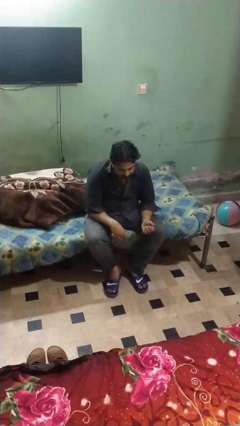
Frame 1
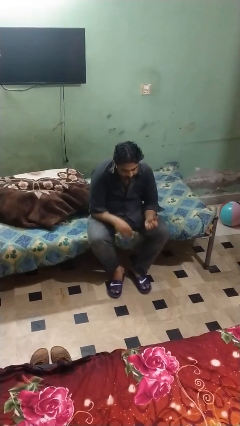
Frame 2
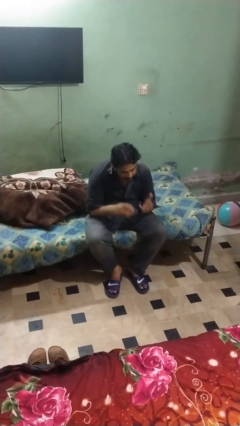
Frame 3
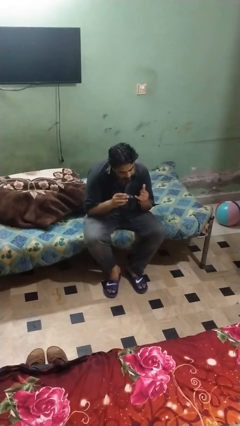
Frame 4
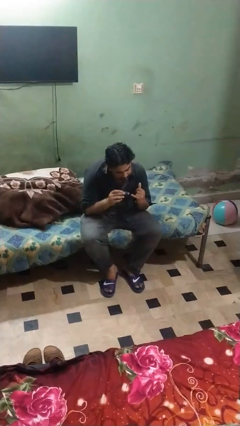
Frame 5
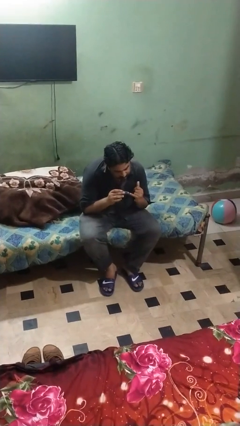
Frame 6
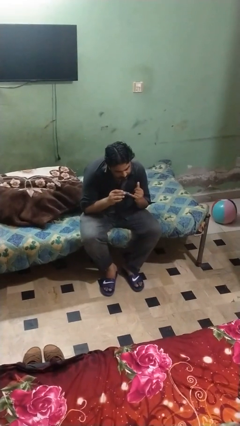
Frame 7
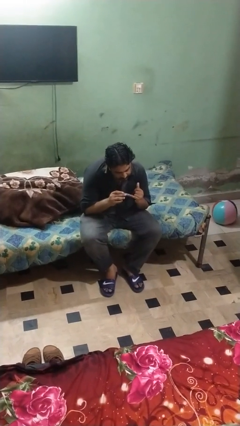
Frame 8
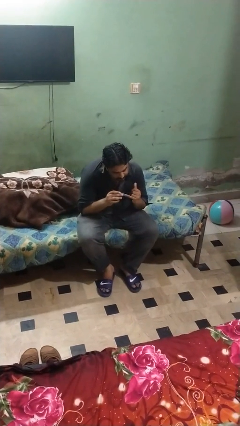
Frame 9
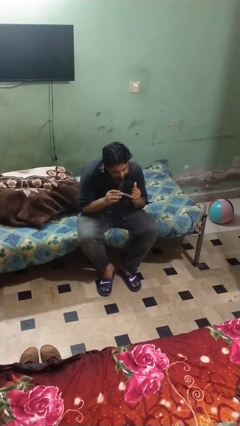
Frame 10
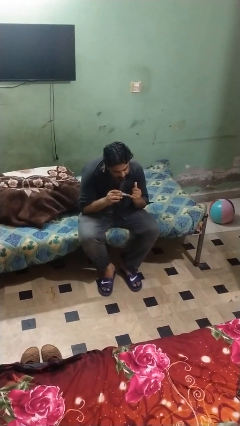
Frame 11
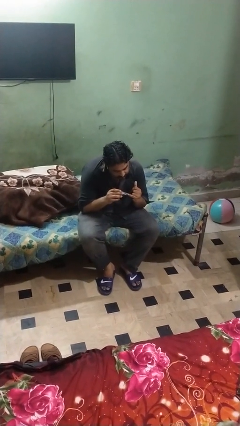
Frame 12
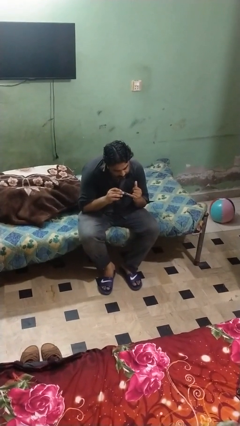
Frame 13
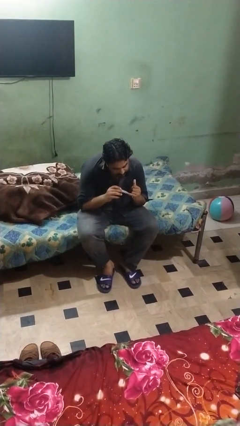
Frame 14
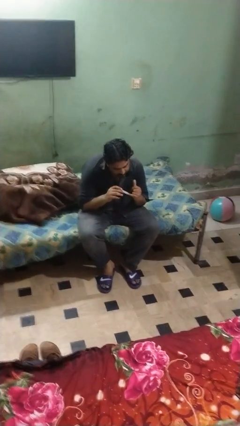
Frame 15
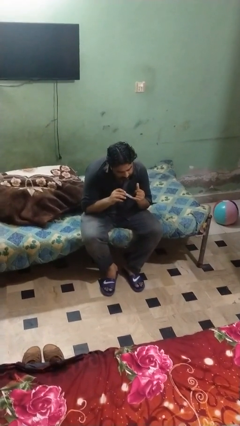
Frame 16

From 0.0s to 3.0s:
person clips fingernails

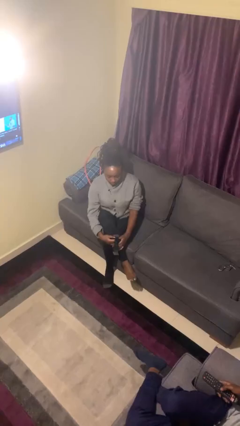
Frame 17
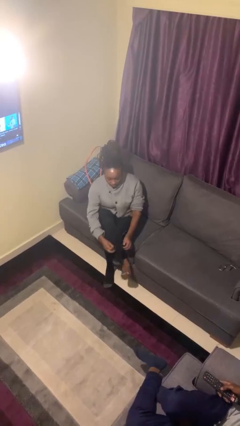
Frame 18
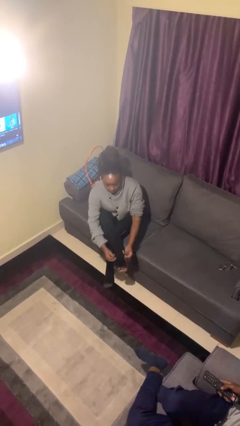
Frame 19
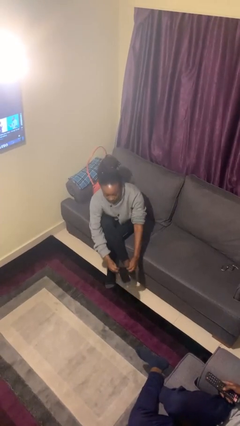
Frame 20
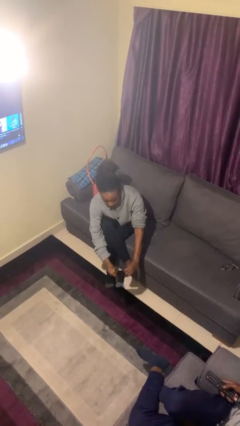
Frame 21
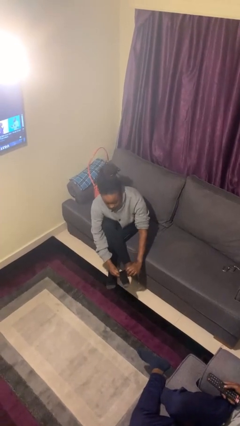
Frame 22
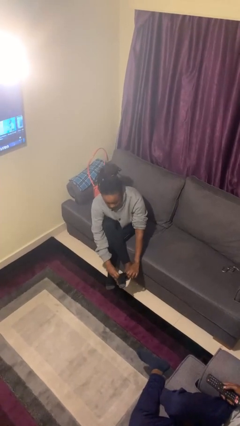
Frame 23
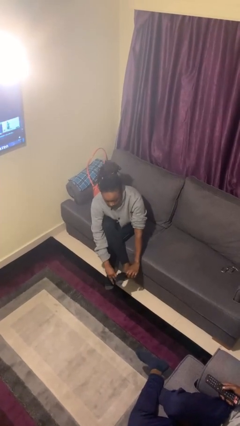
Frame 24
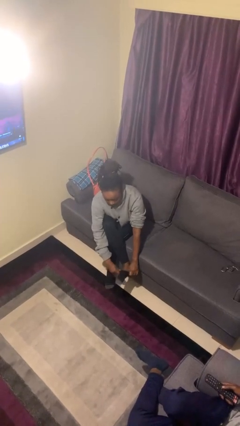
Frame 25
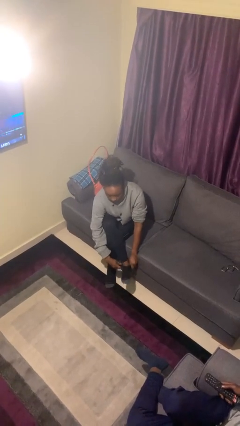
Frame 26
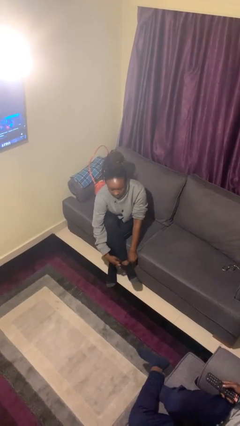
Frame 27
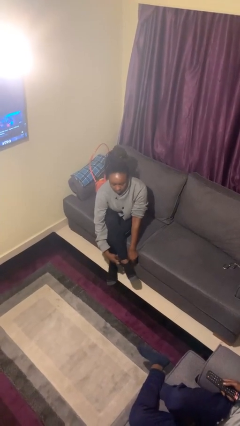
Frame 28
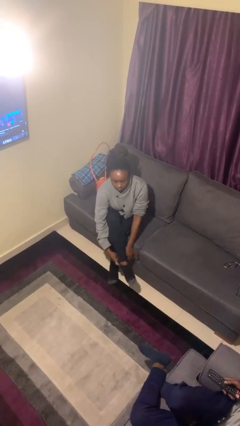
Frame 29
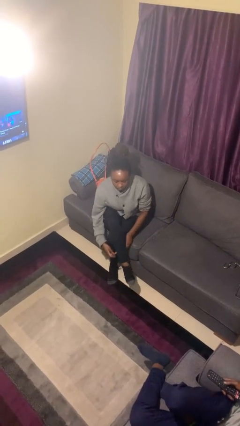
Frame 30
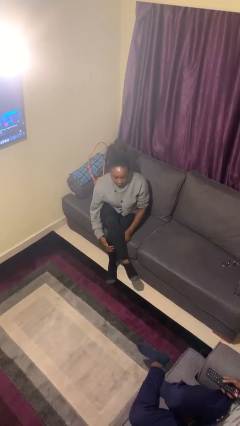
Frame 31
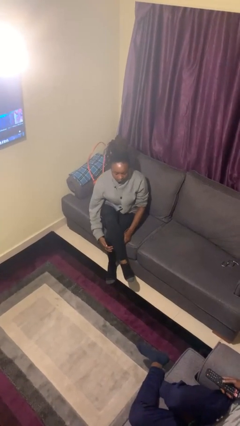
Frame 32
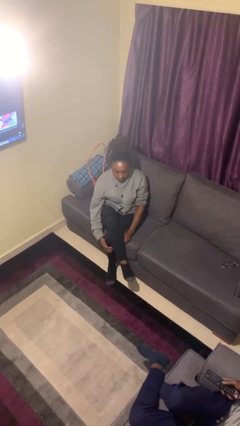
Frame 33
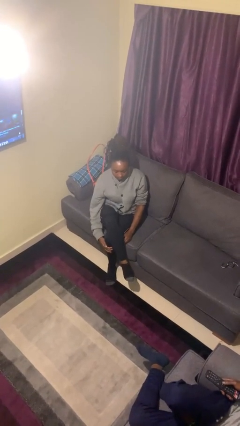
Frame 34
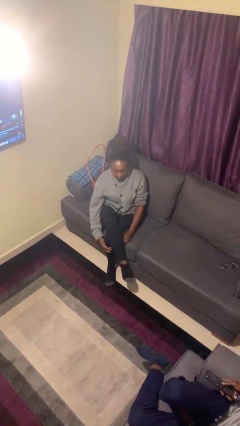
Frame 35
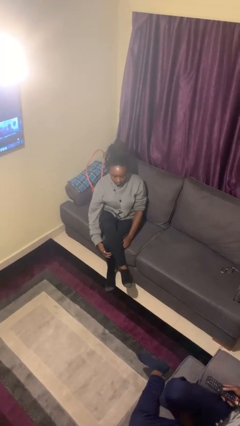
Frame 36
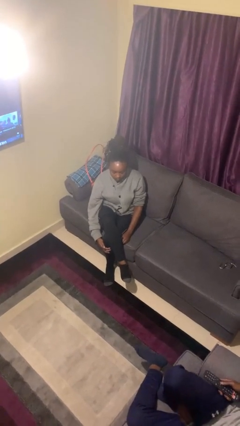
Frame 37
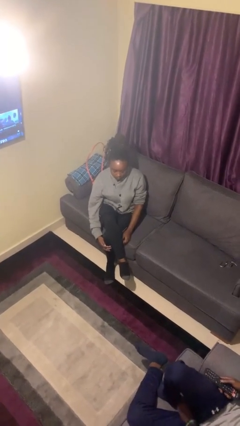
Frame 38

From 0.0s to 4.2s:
person puts on socks

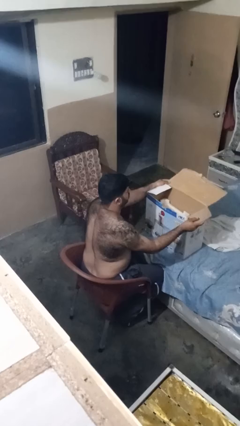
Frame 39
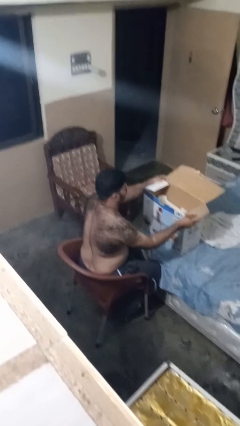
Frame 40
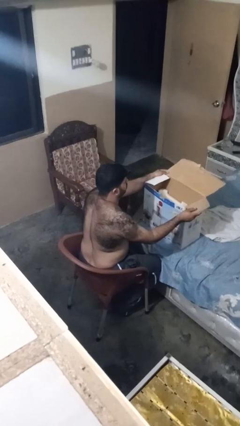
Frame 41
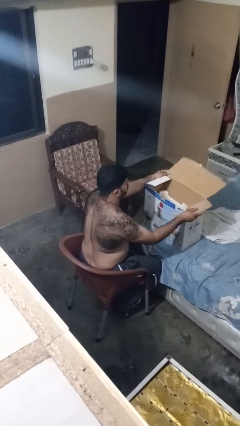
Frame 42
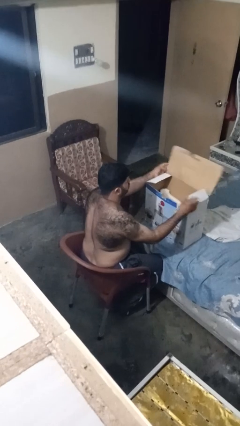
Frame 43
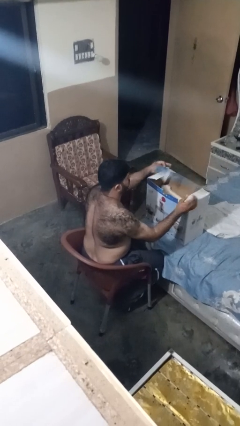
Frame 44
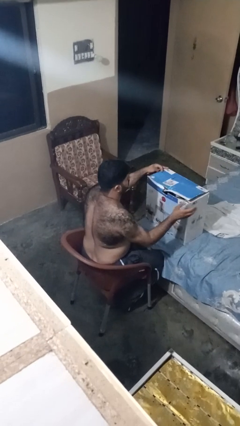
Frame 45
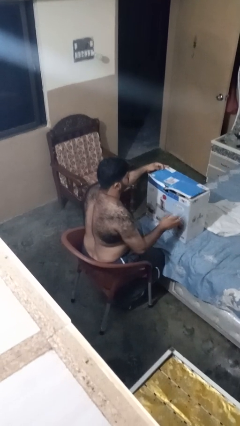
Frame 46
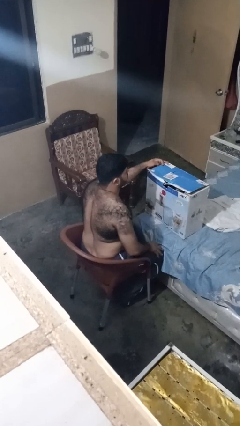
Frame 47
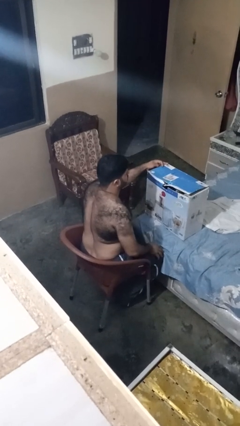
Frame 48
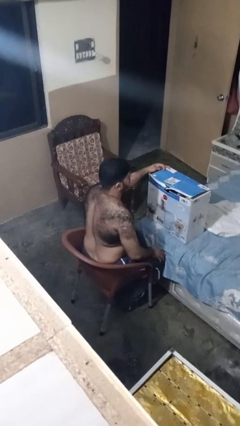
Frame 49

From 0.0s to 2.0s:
person closes box

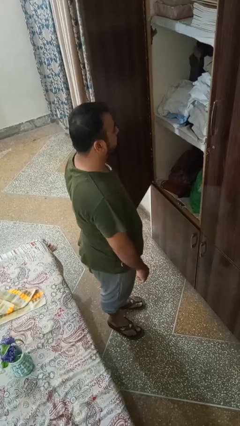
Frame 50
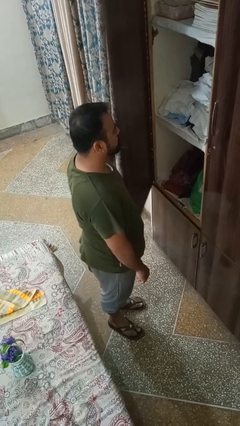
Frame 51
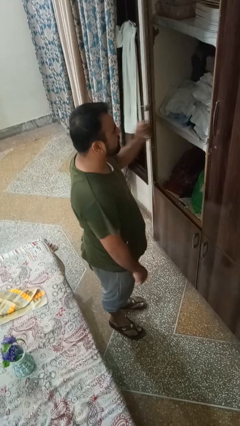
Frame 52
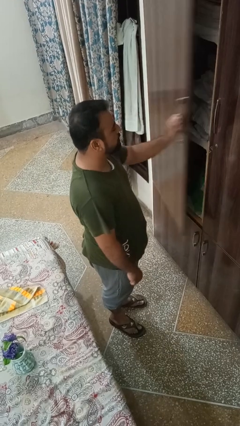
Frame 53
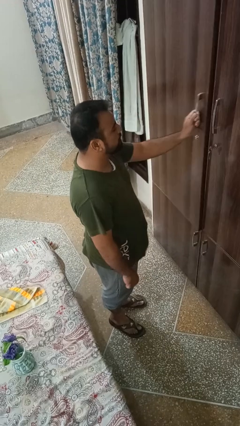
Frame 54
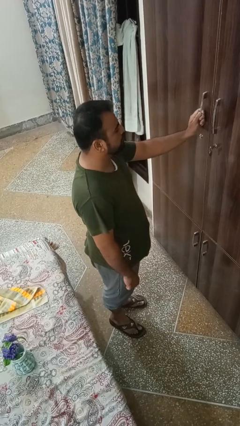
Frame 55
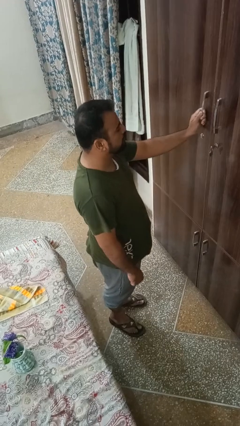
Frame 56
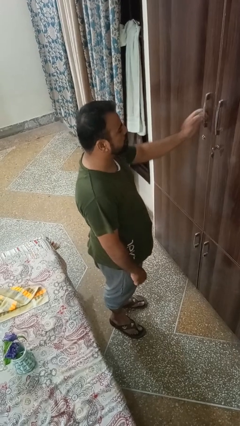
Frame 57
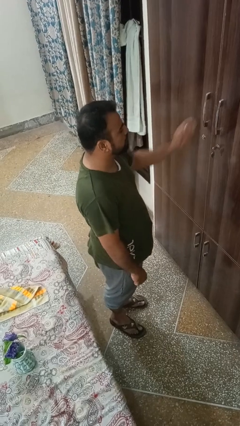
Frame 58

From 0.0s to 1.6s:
person closes closet door

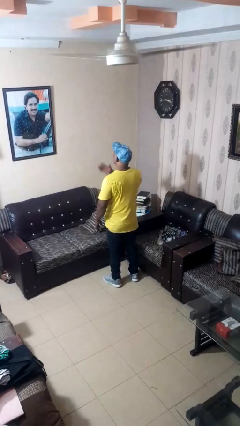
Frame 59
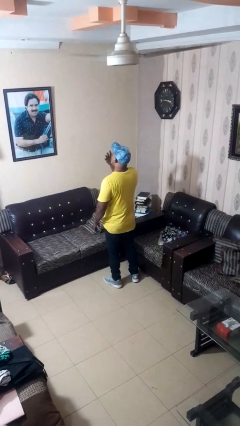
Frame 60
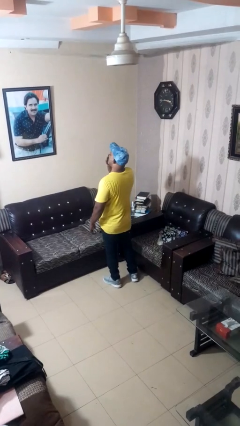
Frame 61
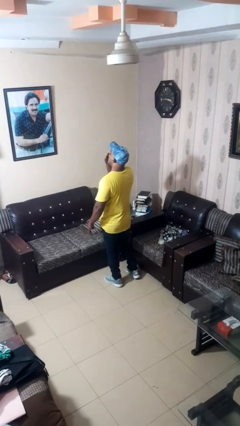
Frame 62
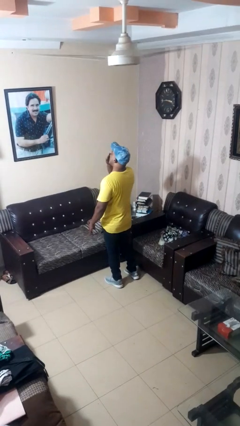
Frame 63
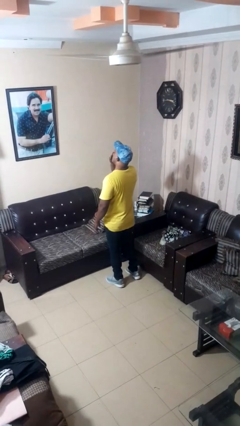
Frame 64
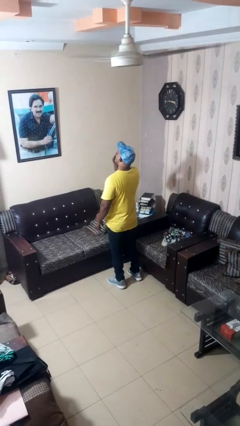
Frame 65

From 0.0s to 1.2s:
person yawns

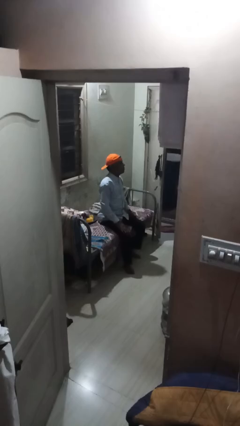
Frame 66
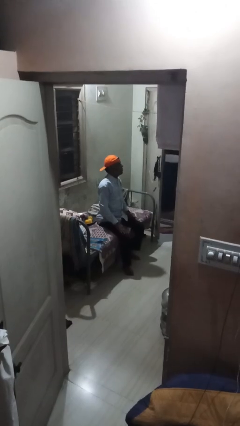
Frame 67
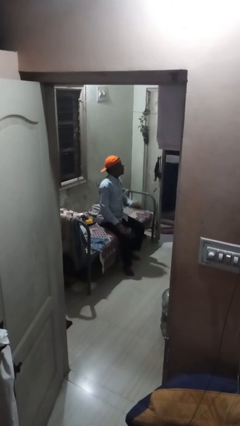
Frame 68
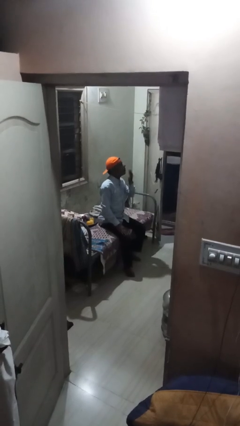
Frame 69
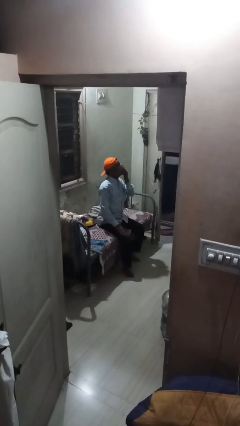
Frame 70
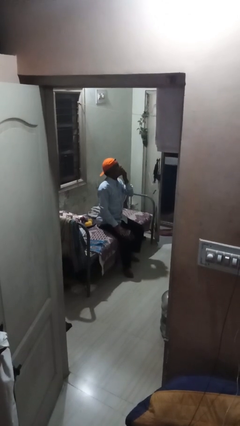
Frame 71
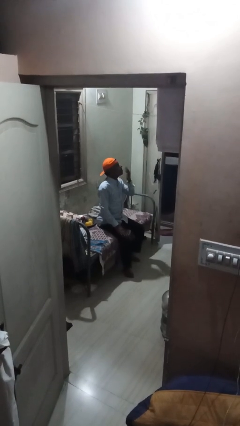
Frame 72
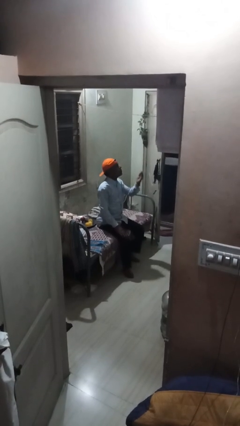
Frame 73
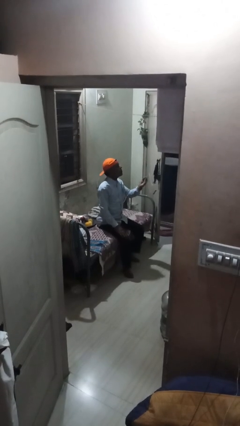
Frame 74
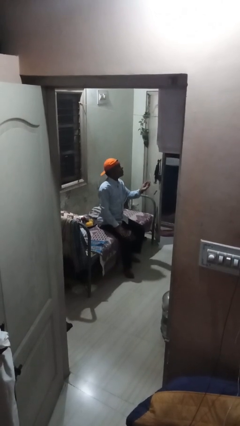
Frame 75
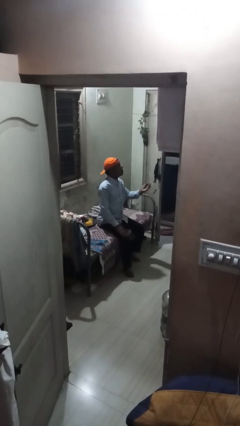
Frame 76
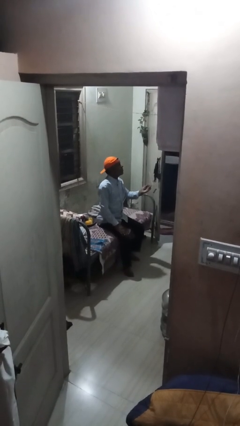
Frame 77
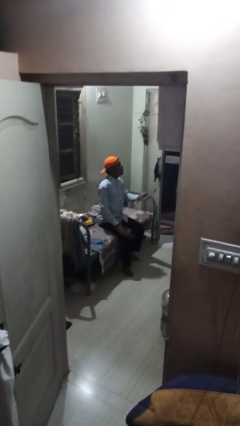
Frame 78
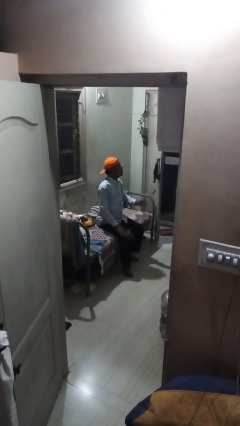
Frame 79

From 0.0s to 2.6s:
person gestures blow kiss

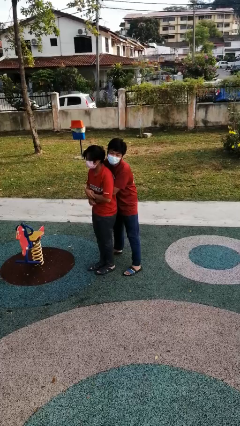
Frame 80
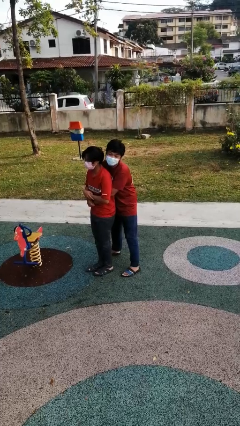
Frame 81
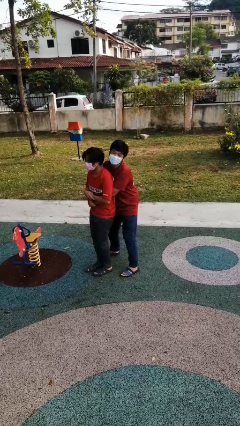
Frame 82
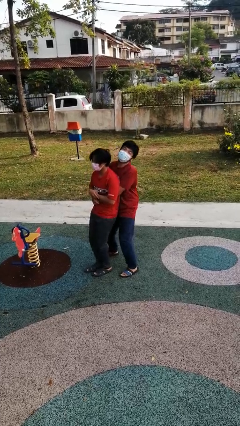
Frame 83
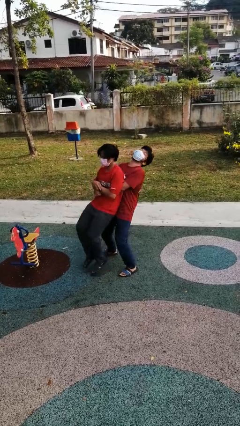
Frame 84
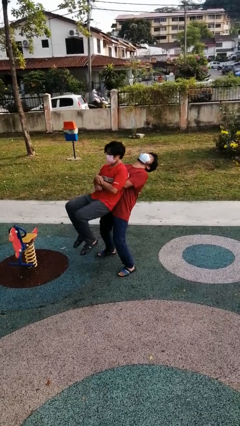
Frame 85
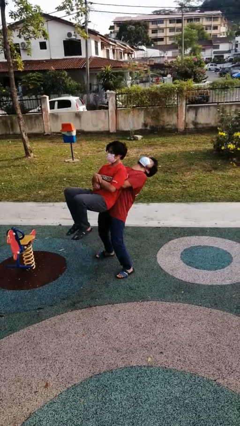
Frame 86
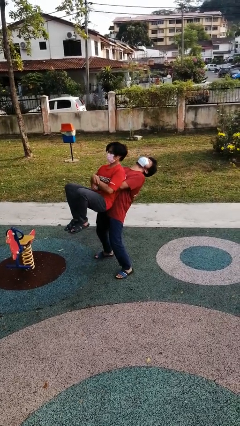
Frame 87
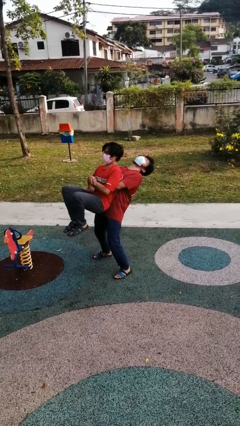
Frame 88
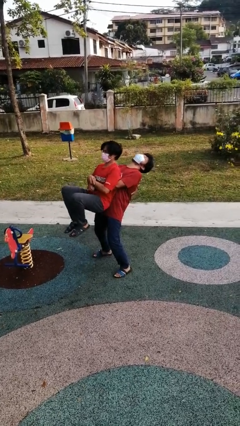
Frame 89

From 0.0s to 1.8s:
person picks up person

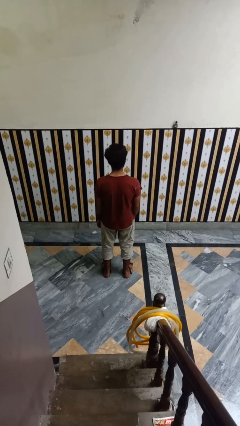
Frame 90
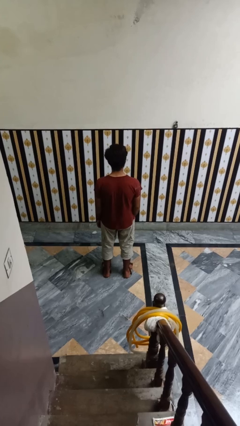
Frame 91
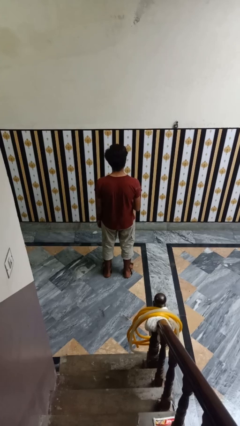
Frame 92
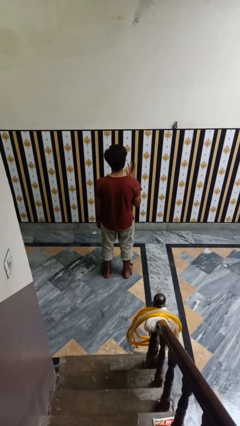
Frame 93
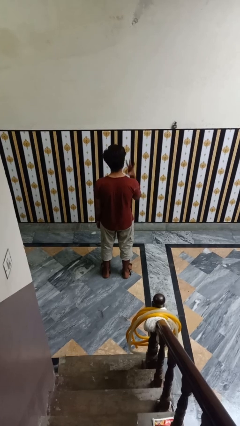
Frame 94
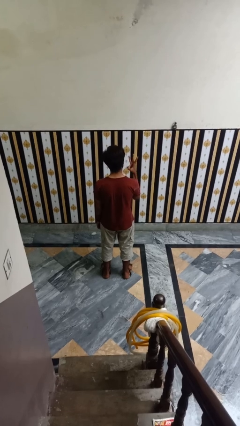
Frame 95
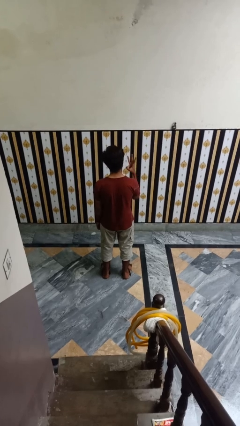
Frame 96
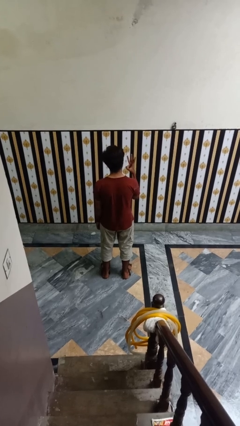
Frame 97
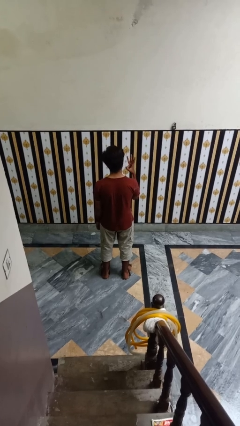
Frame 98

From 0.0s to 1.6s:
person gestures number three
